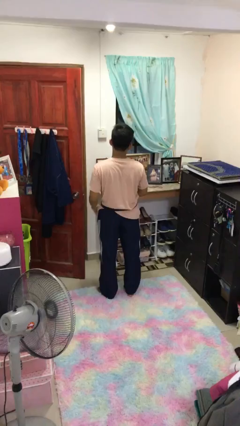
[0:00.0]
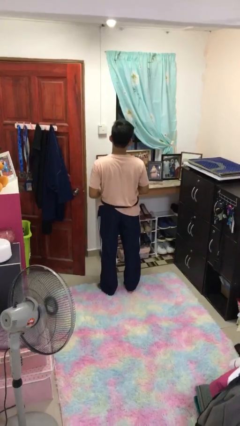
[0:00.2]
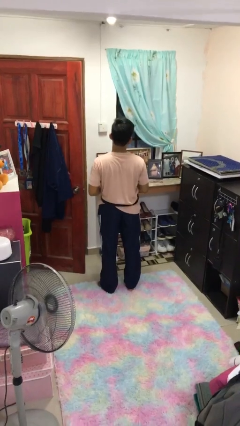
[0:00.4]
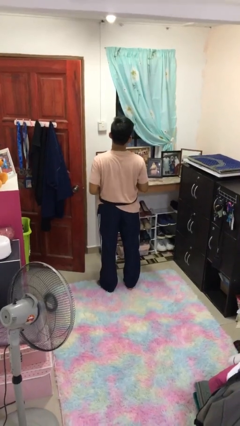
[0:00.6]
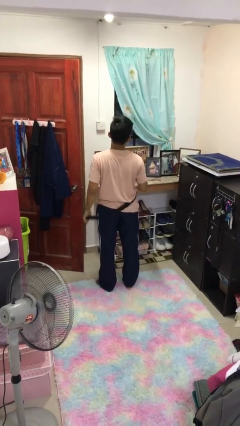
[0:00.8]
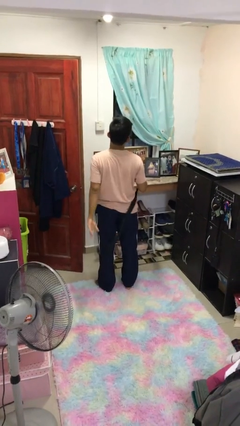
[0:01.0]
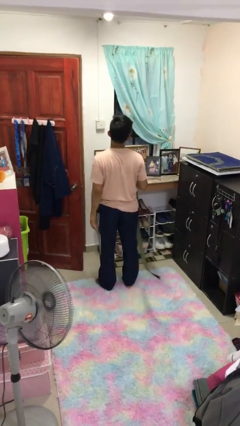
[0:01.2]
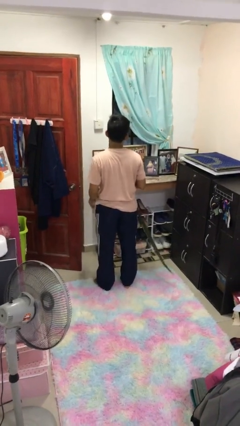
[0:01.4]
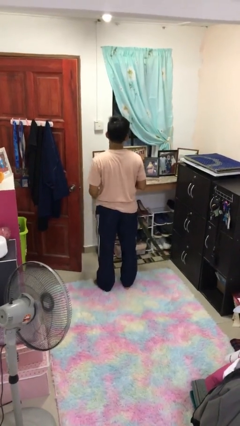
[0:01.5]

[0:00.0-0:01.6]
person takes off belt

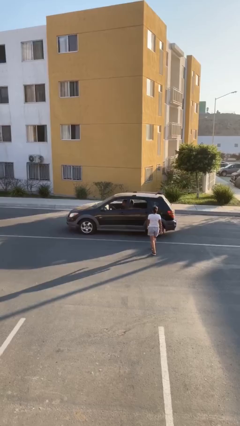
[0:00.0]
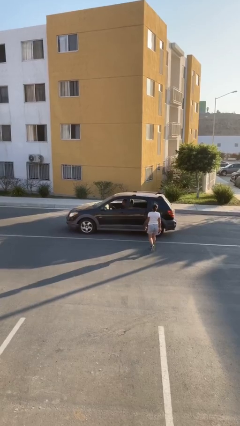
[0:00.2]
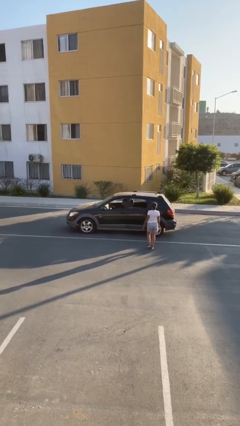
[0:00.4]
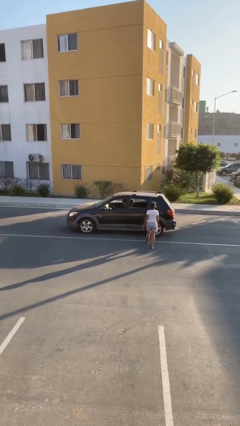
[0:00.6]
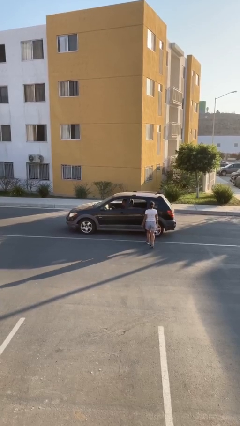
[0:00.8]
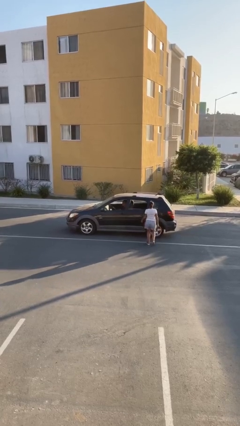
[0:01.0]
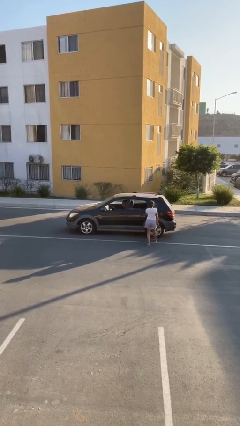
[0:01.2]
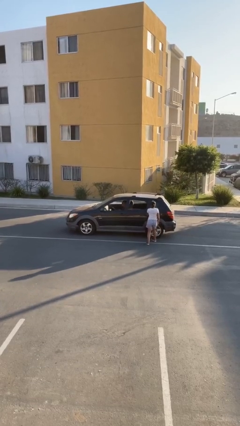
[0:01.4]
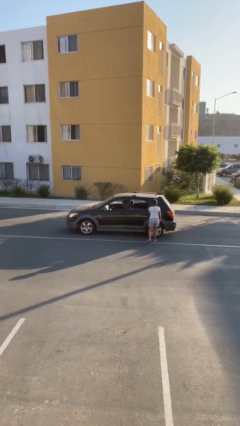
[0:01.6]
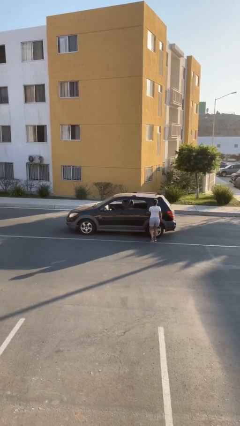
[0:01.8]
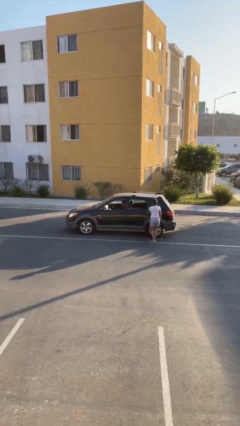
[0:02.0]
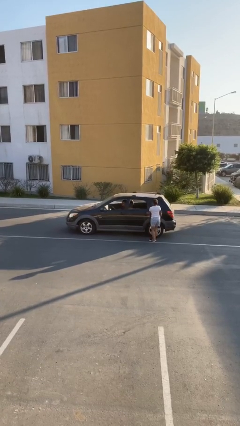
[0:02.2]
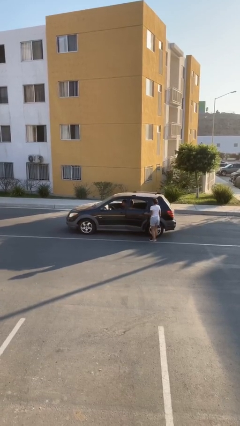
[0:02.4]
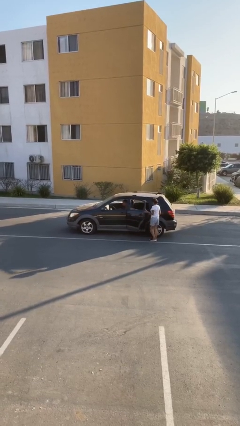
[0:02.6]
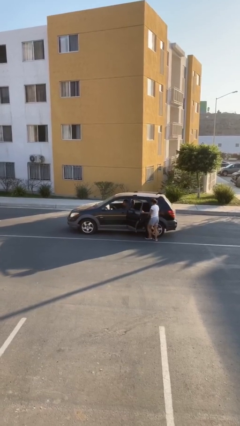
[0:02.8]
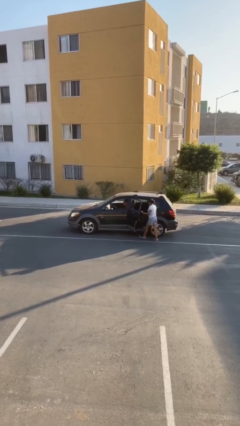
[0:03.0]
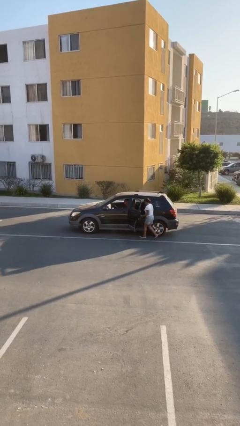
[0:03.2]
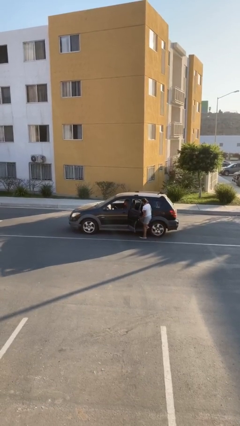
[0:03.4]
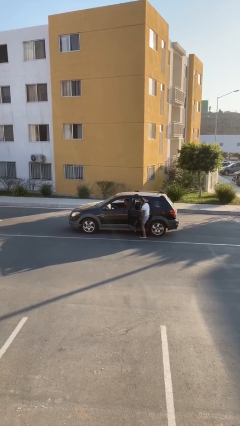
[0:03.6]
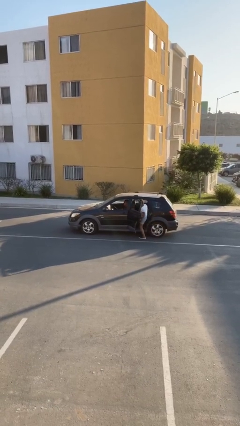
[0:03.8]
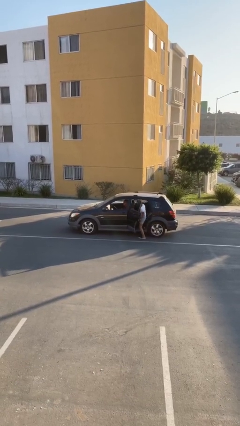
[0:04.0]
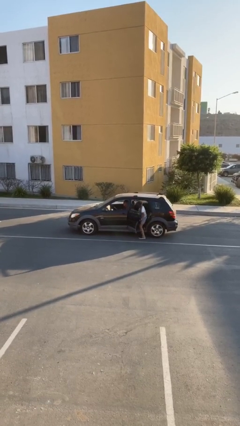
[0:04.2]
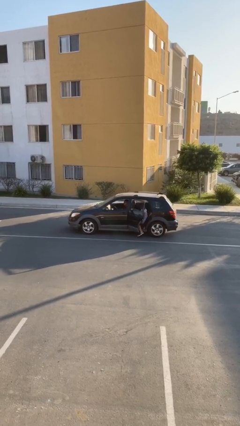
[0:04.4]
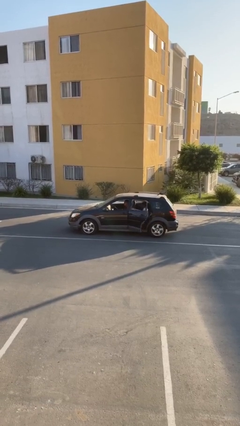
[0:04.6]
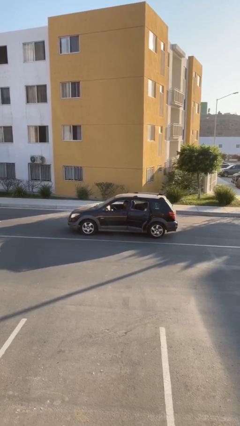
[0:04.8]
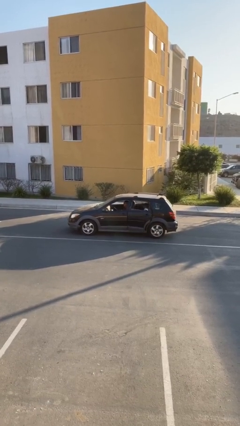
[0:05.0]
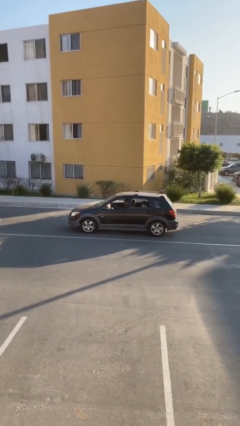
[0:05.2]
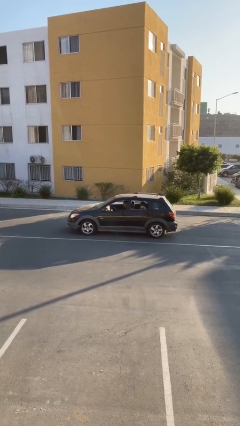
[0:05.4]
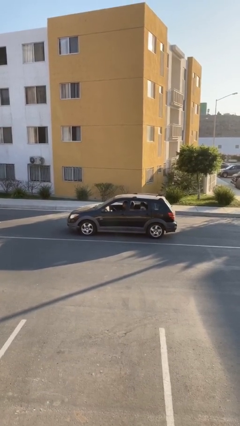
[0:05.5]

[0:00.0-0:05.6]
car picks up person

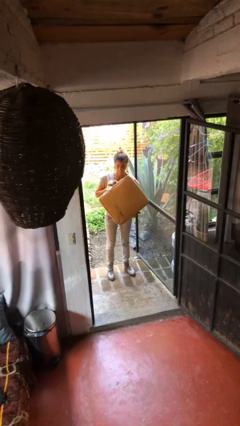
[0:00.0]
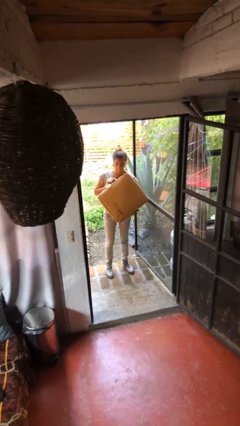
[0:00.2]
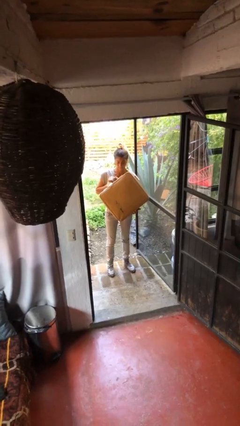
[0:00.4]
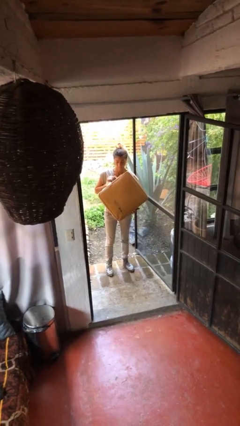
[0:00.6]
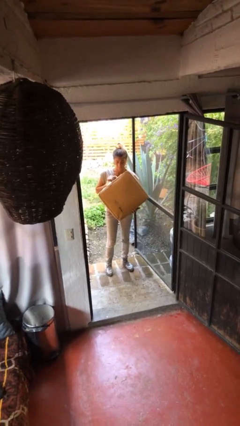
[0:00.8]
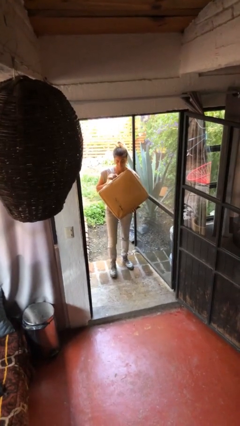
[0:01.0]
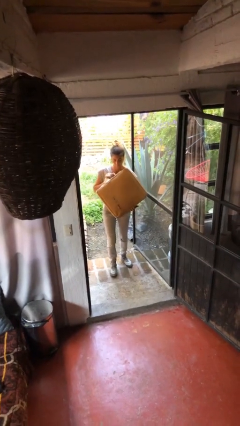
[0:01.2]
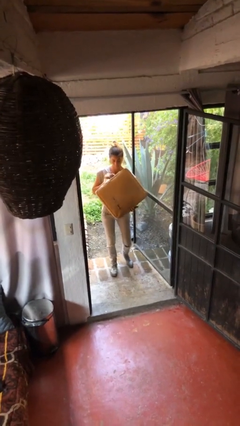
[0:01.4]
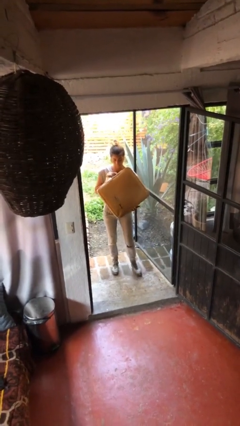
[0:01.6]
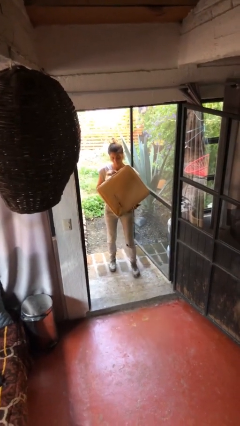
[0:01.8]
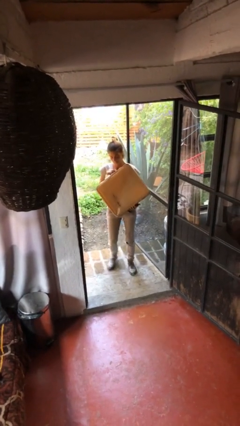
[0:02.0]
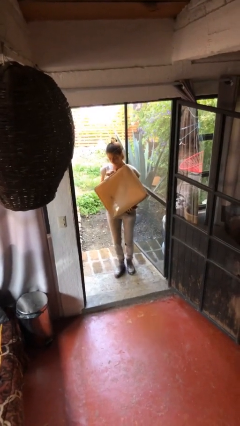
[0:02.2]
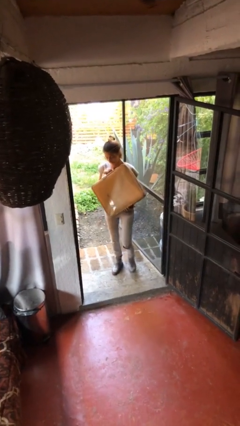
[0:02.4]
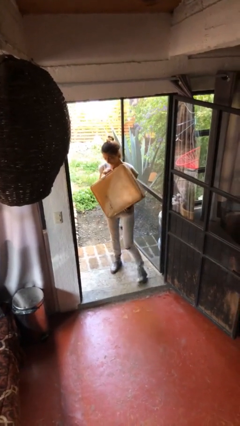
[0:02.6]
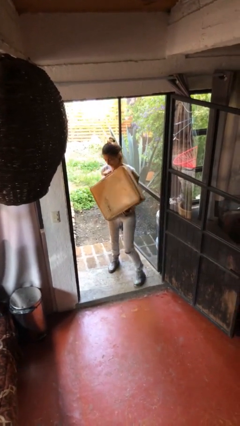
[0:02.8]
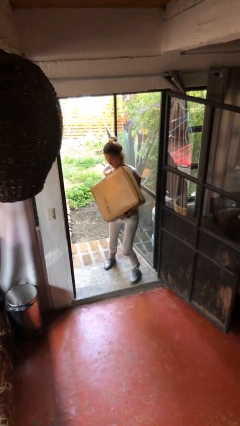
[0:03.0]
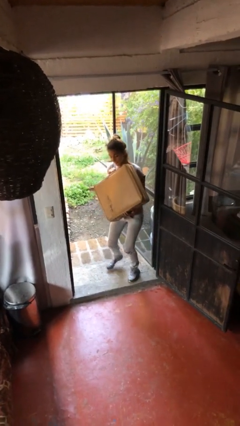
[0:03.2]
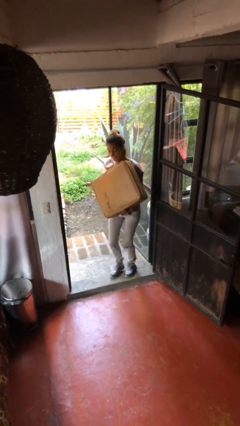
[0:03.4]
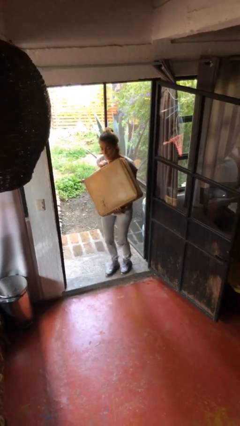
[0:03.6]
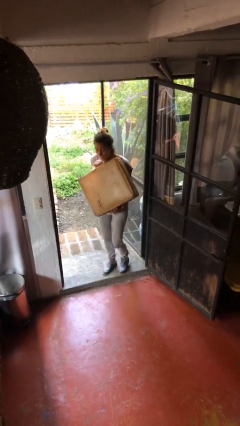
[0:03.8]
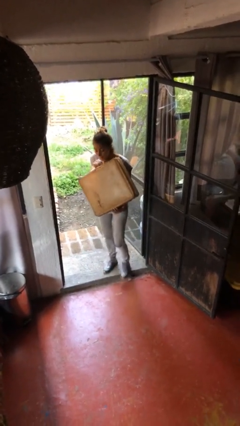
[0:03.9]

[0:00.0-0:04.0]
person carries heavy object

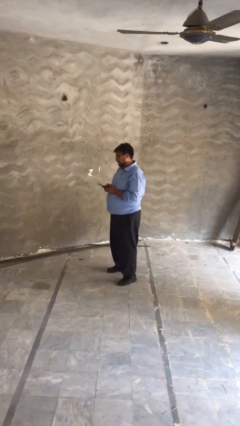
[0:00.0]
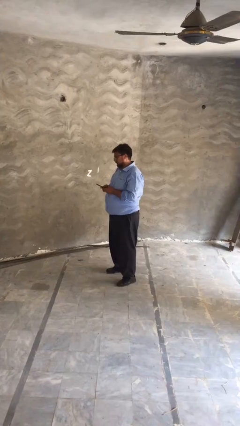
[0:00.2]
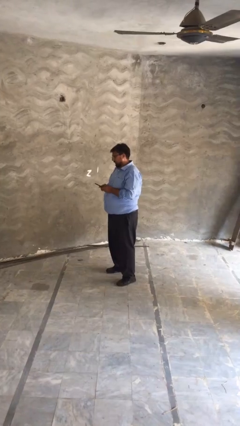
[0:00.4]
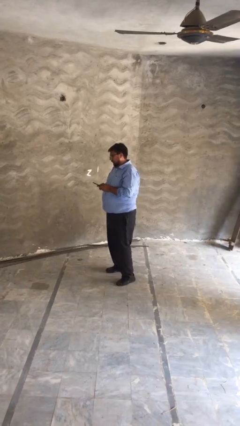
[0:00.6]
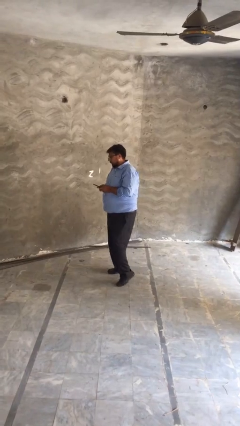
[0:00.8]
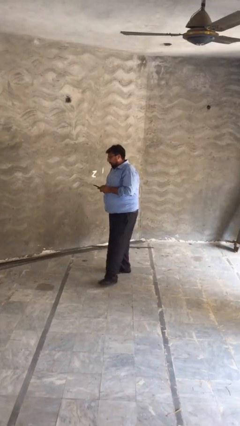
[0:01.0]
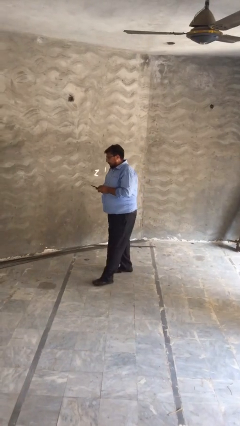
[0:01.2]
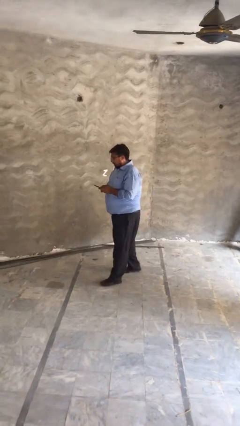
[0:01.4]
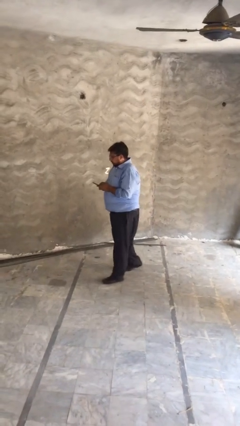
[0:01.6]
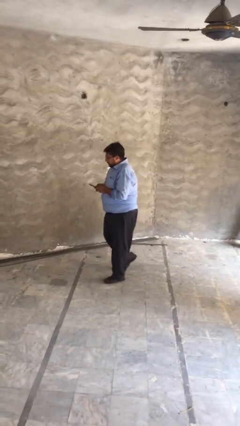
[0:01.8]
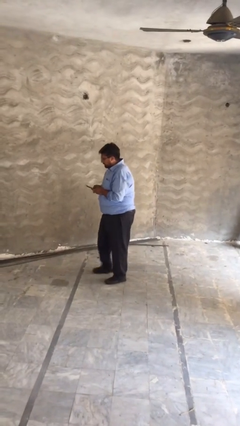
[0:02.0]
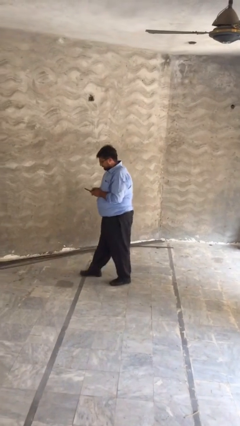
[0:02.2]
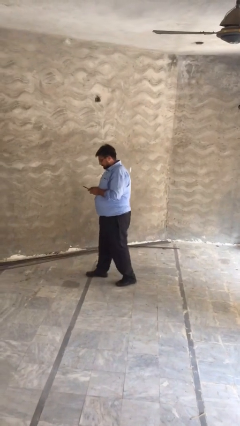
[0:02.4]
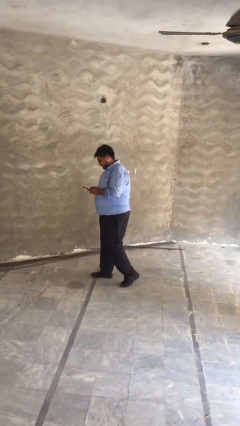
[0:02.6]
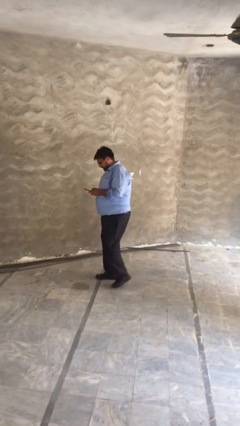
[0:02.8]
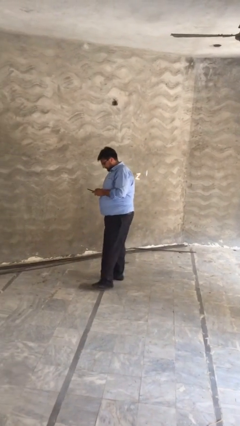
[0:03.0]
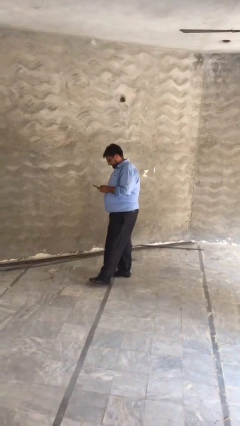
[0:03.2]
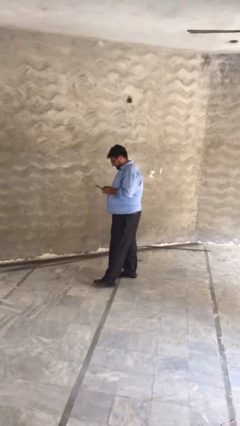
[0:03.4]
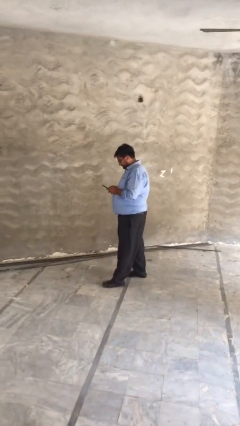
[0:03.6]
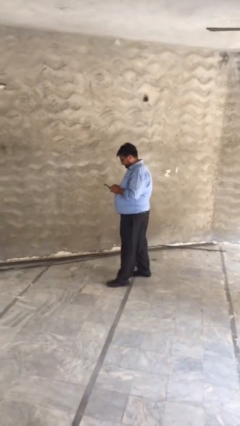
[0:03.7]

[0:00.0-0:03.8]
person texts on phone

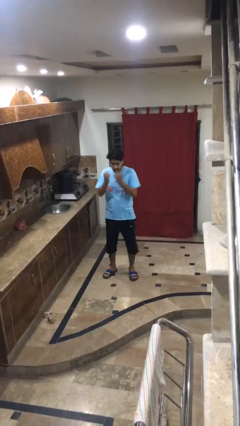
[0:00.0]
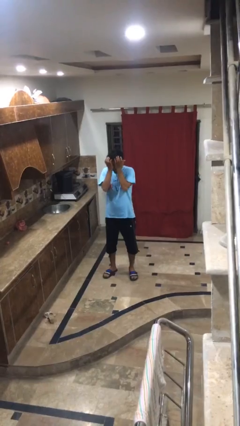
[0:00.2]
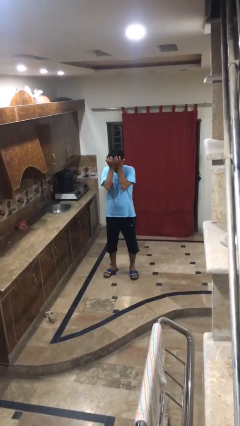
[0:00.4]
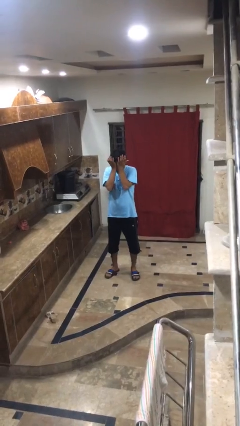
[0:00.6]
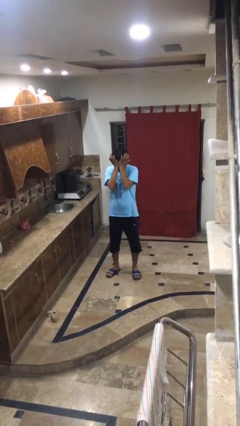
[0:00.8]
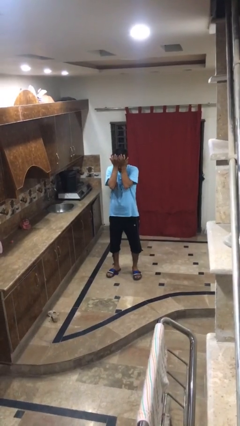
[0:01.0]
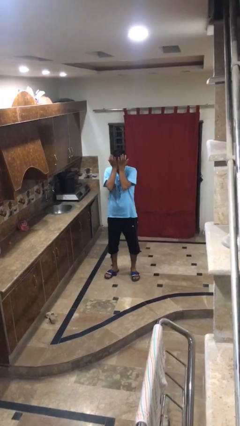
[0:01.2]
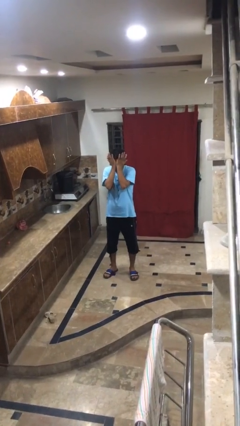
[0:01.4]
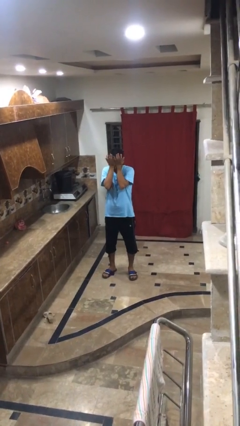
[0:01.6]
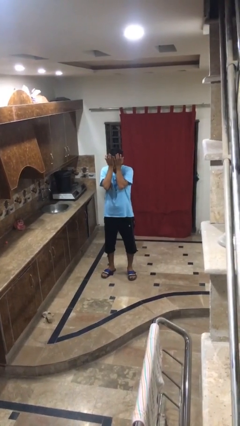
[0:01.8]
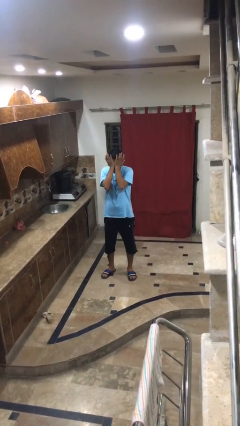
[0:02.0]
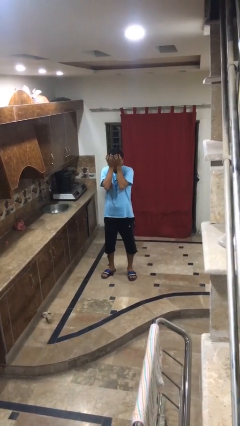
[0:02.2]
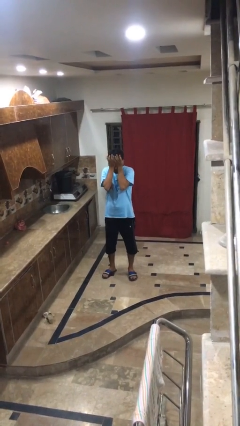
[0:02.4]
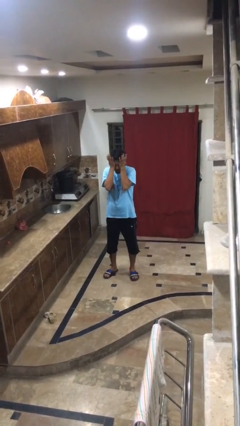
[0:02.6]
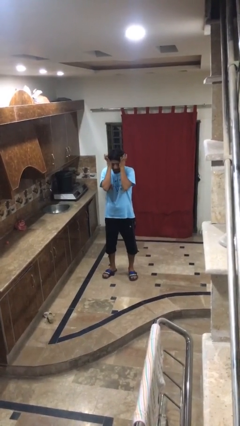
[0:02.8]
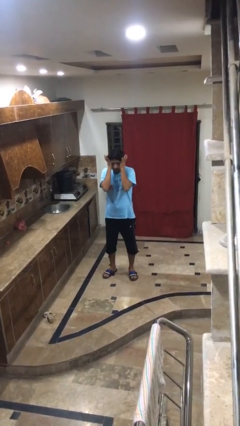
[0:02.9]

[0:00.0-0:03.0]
person rubs eyes
